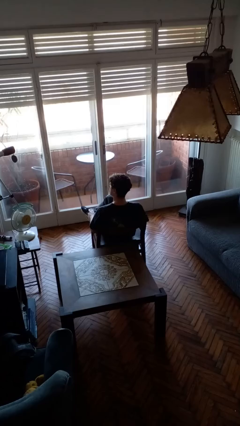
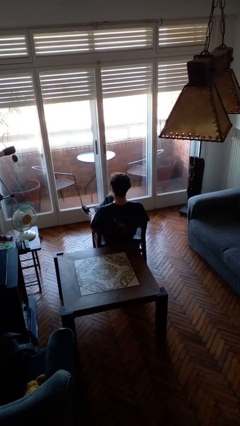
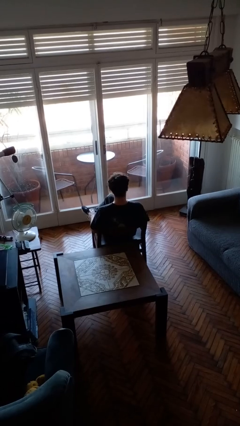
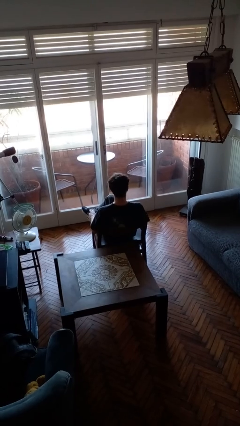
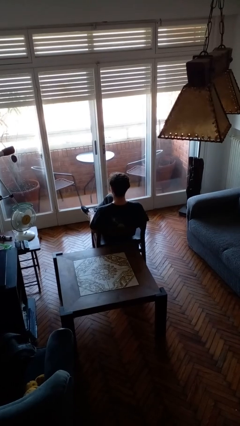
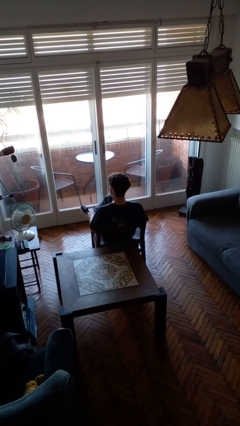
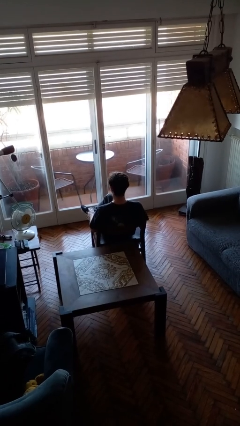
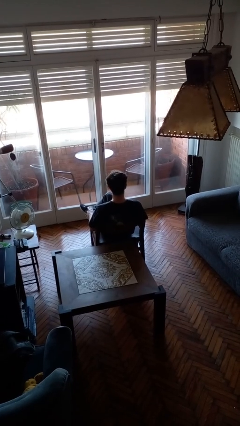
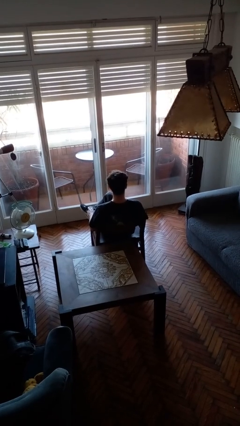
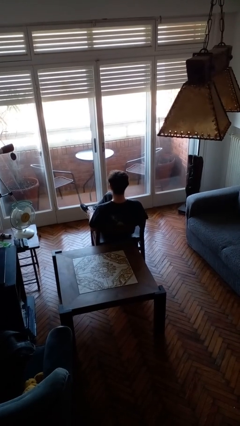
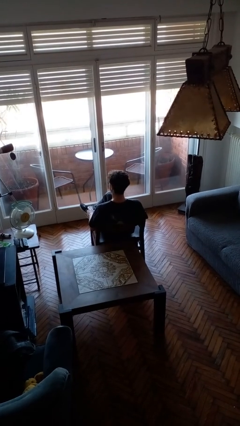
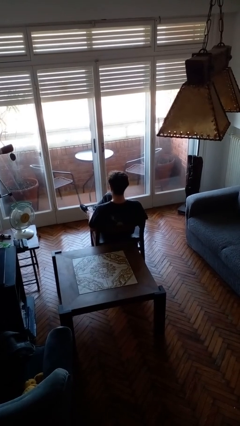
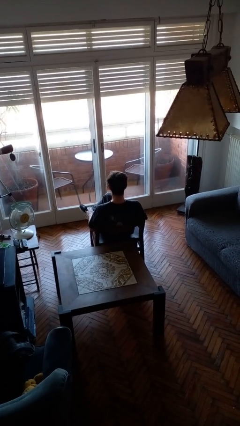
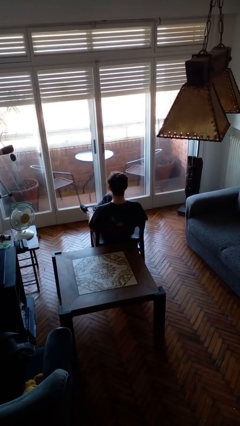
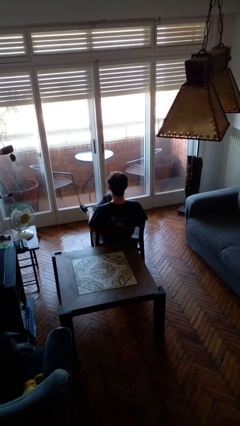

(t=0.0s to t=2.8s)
person shakes head

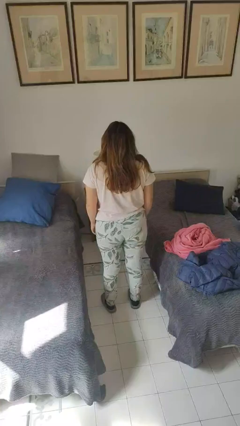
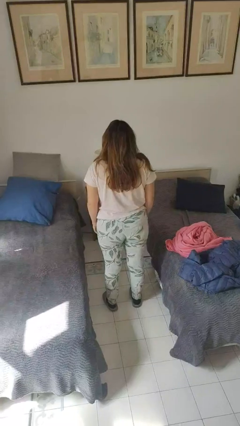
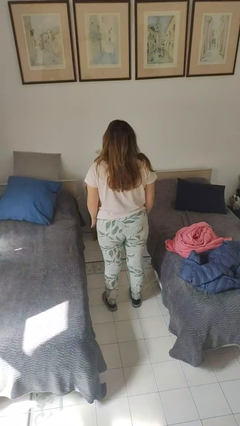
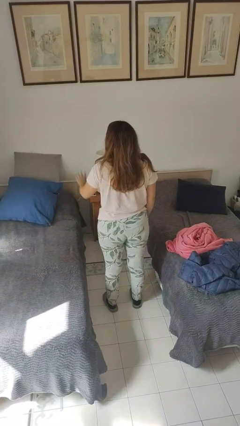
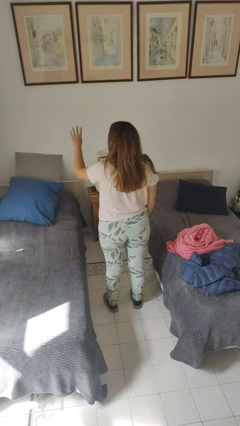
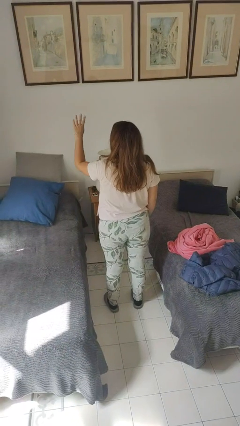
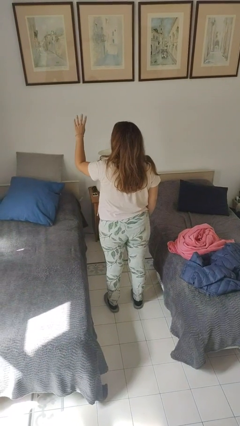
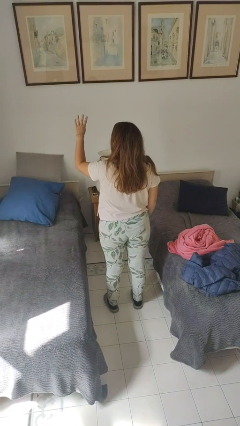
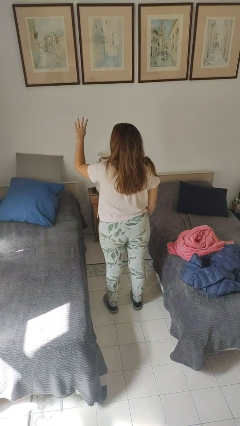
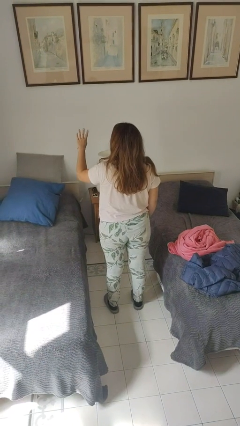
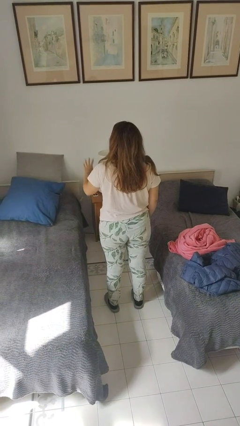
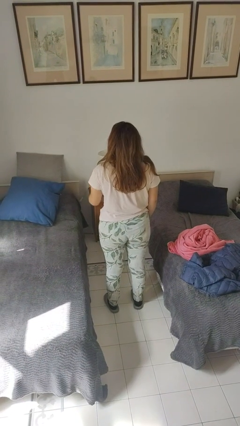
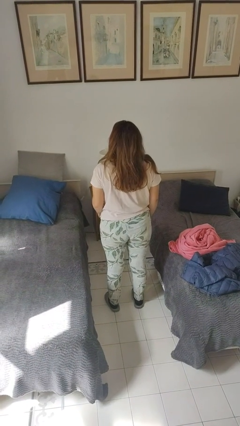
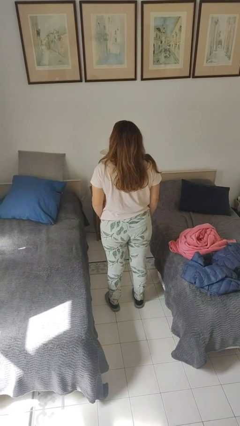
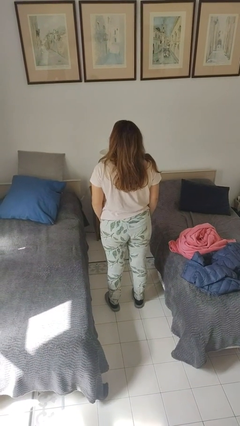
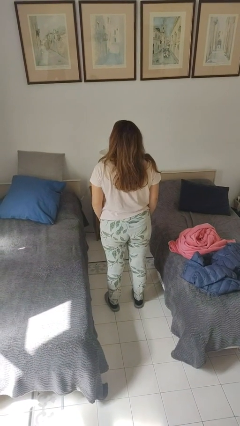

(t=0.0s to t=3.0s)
person gestures number four

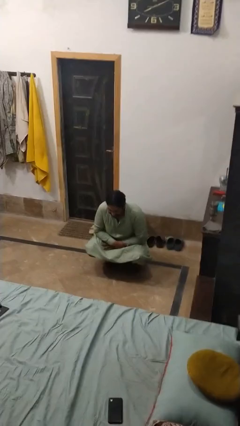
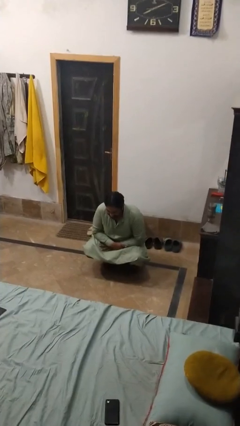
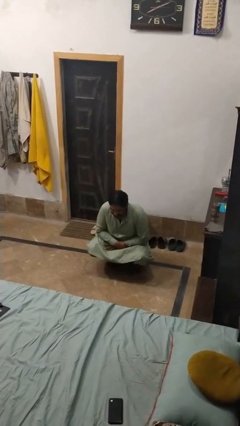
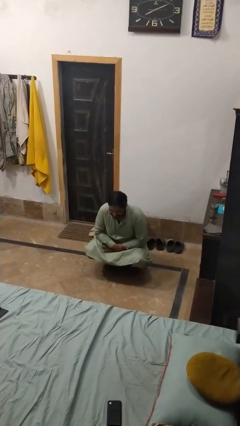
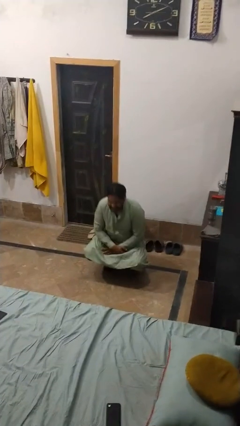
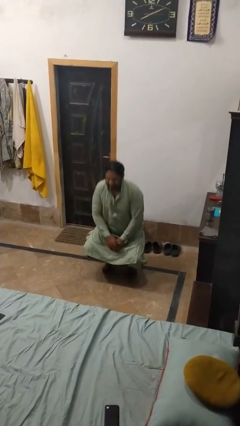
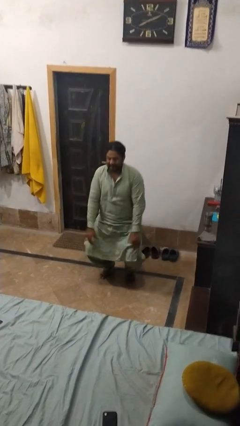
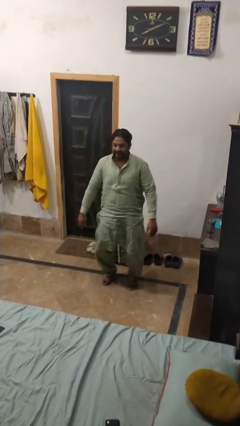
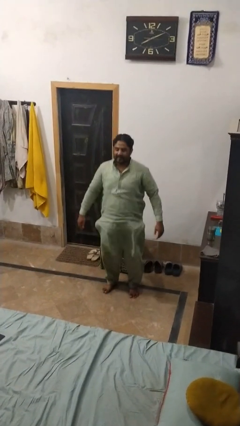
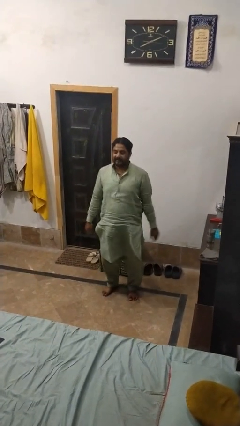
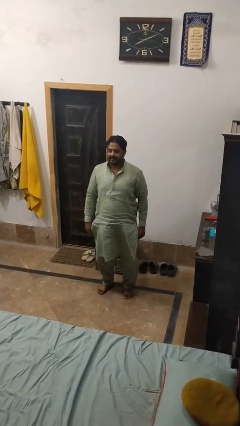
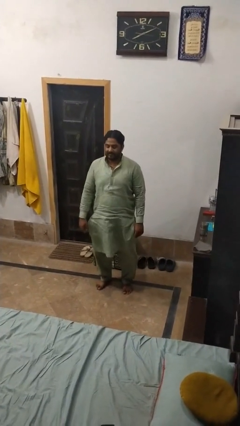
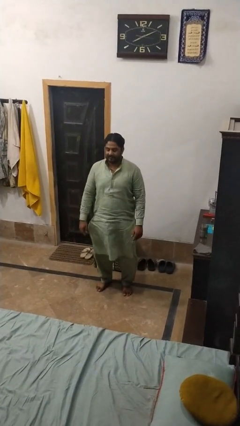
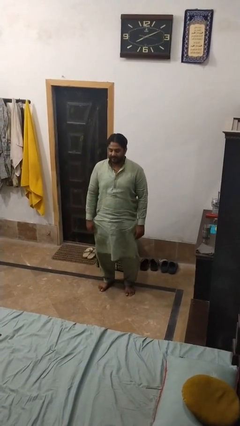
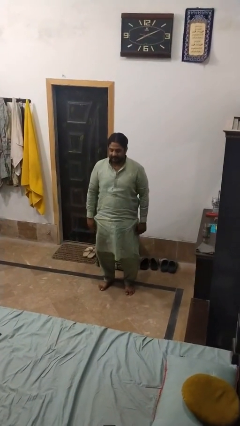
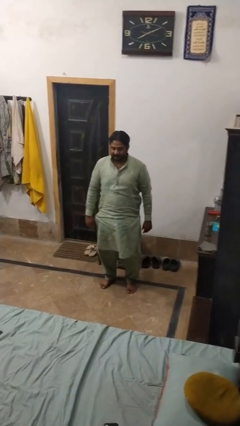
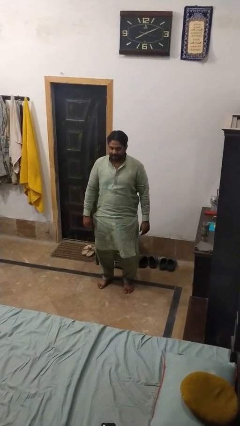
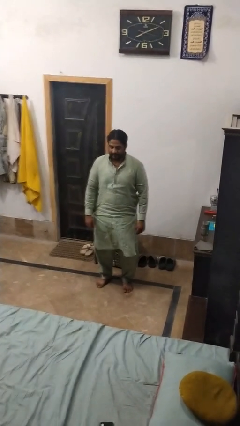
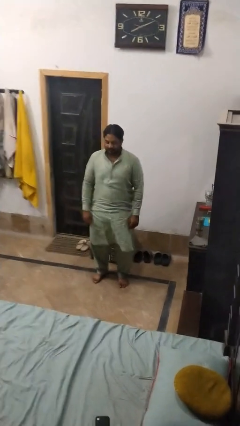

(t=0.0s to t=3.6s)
person stands up

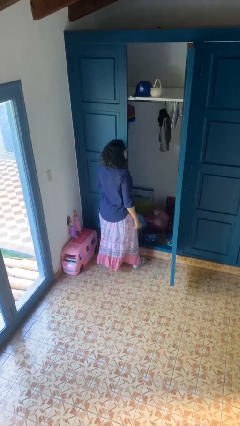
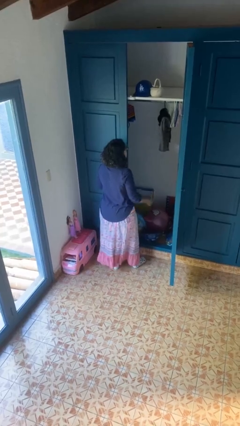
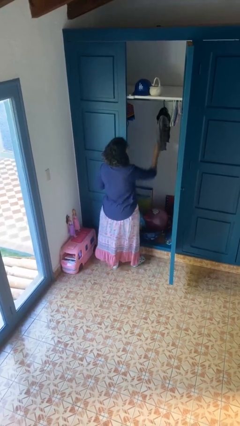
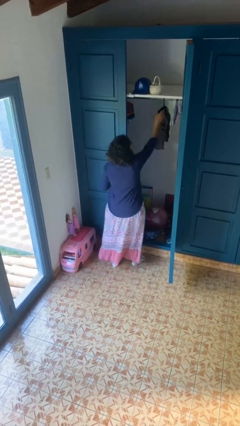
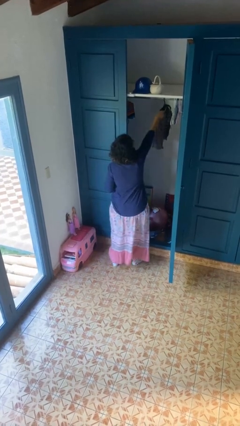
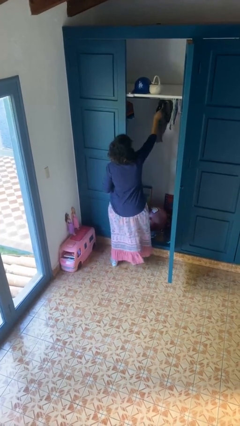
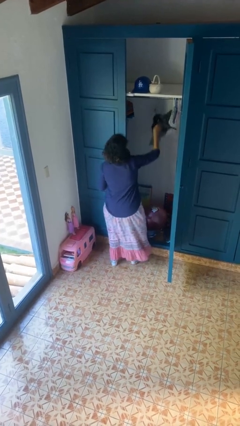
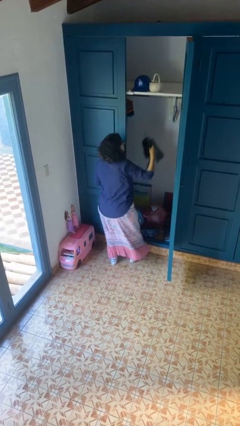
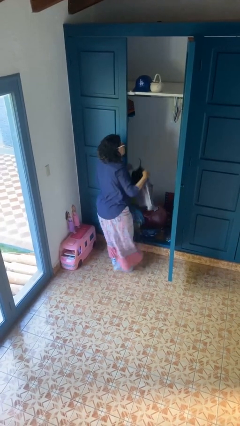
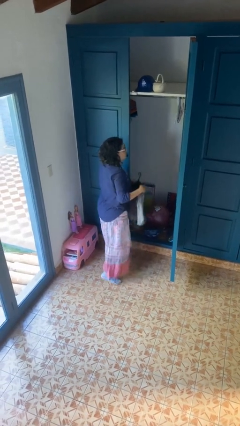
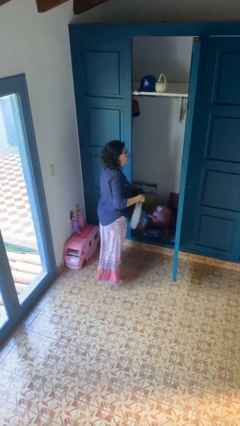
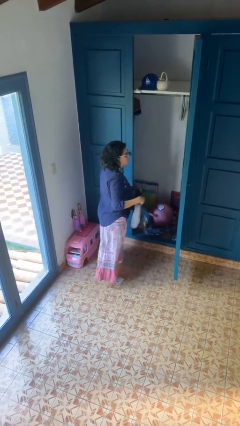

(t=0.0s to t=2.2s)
person takes clothes from closet

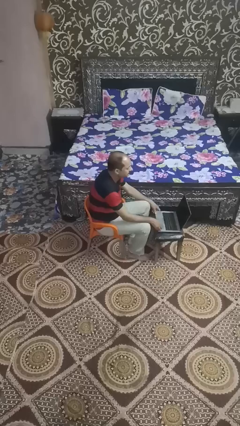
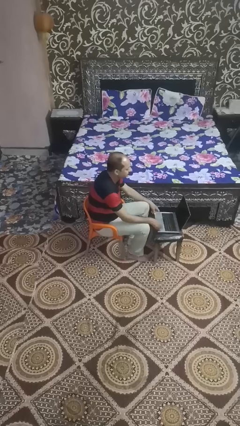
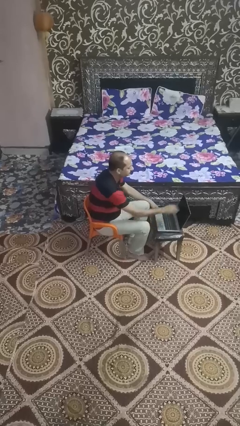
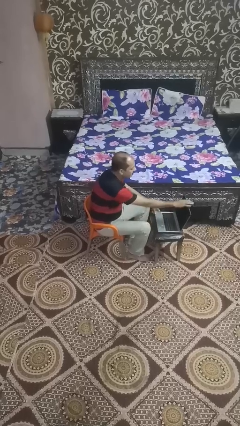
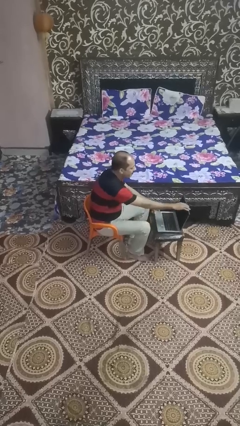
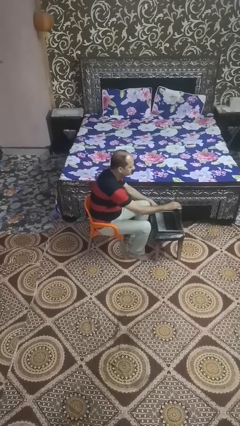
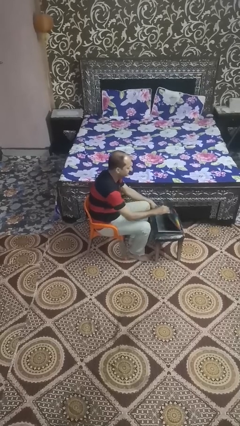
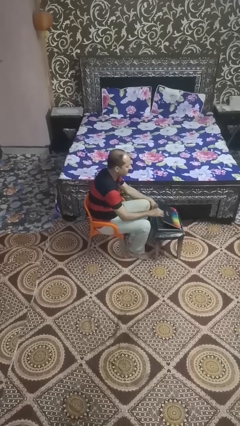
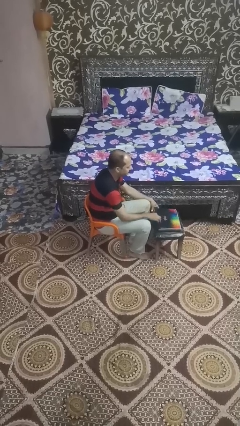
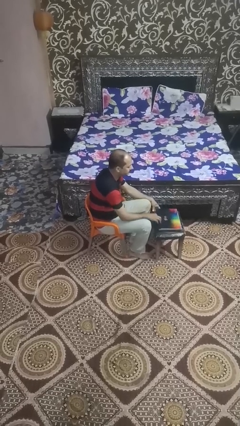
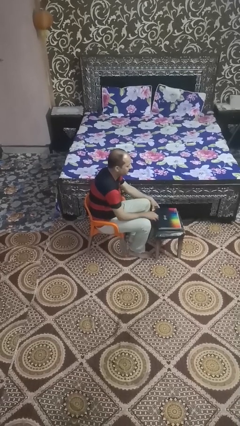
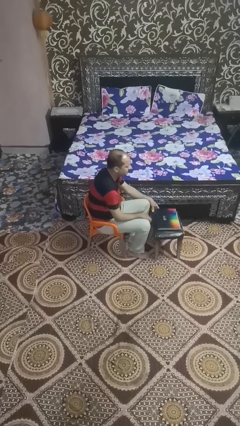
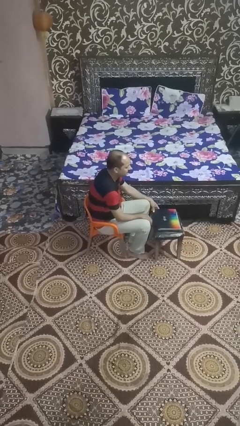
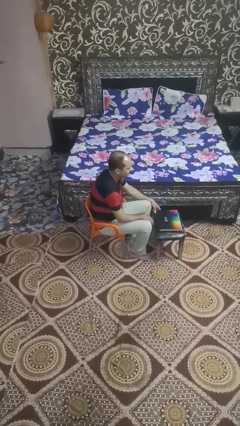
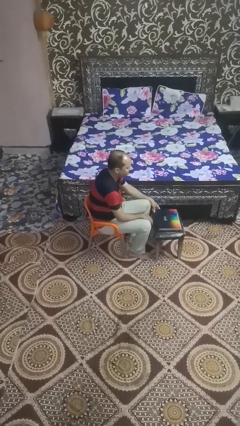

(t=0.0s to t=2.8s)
person closes laptop

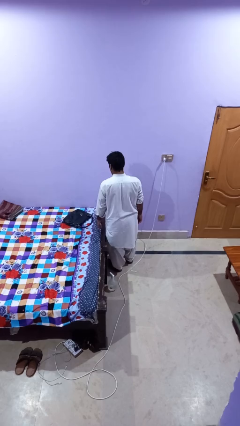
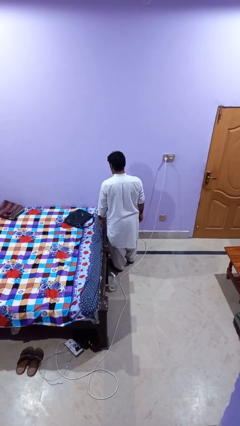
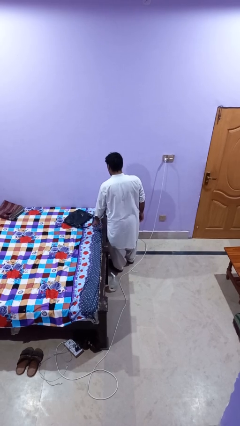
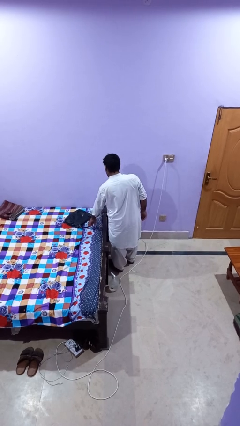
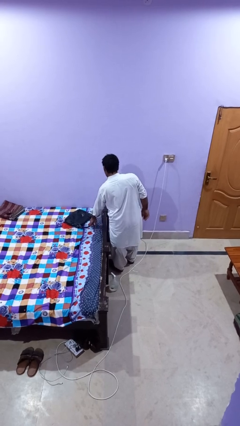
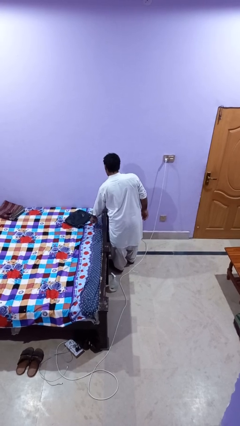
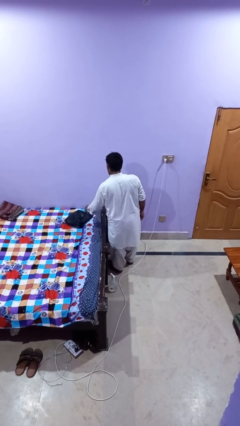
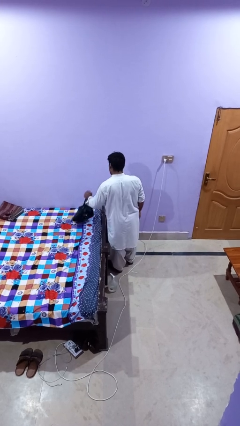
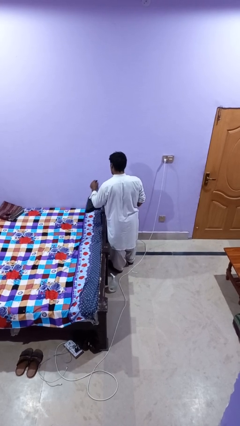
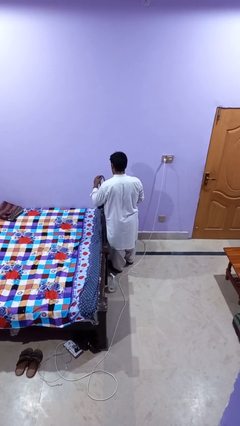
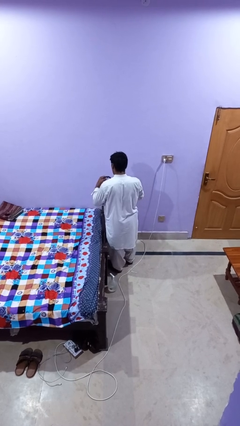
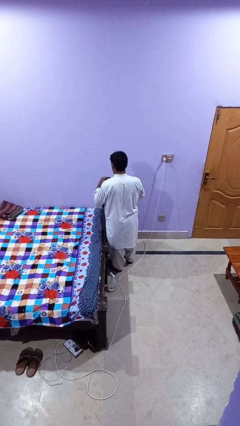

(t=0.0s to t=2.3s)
person picks up object from bed

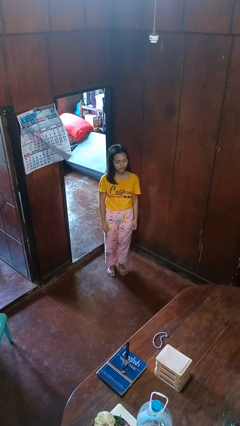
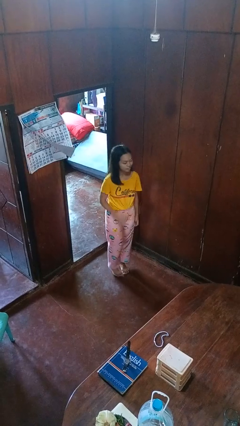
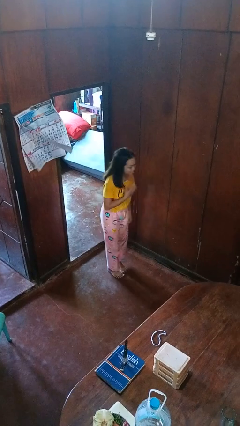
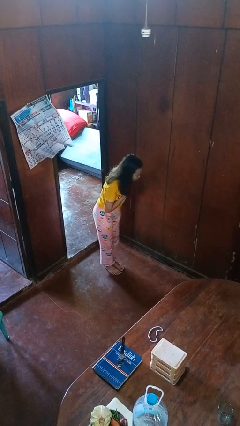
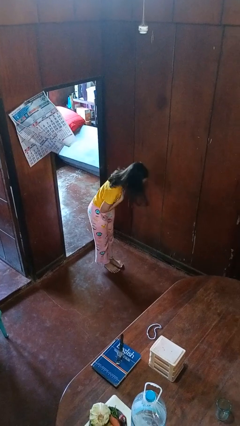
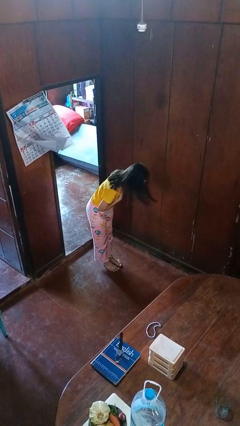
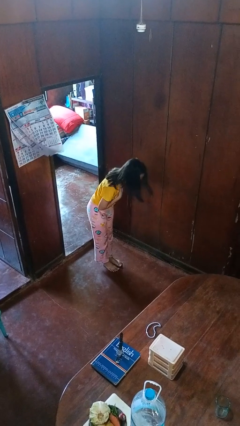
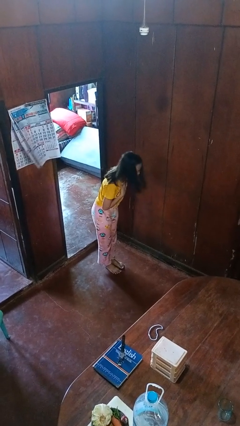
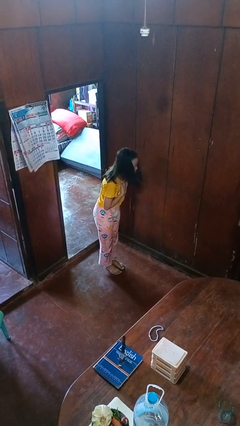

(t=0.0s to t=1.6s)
person bows
